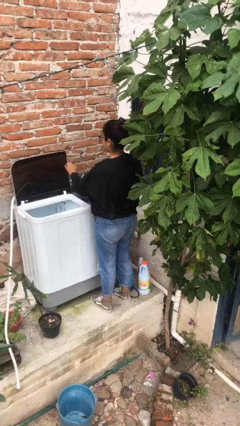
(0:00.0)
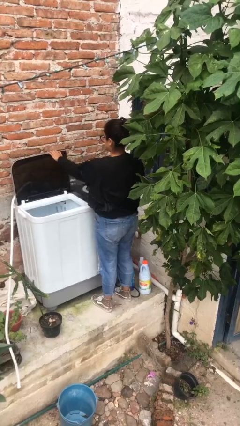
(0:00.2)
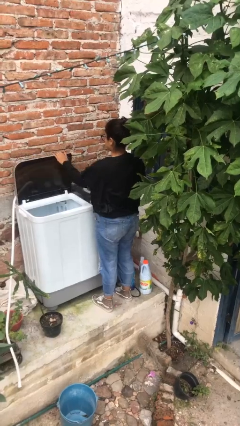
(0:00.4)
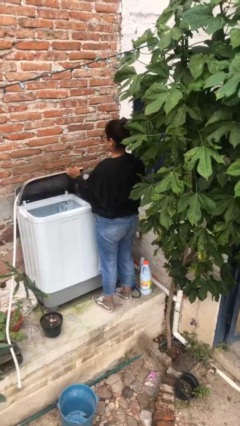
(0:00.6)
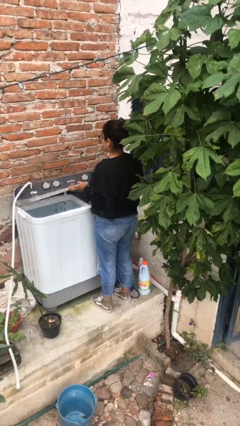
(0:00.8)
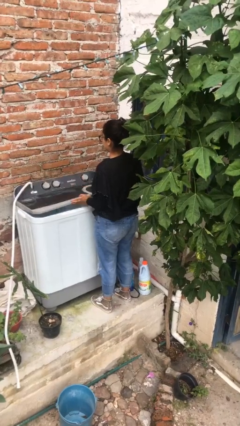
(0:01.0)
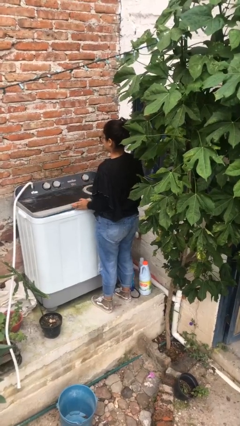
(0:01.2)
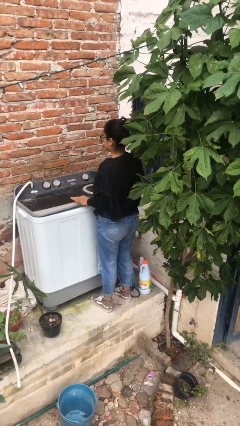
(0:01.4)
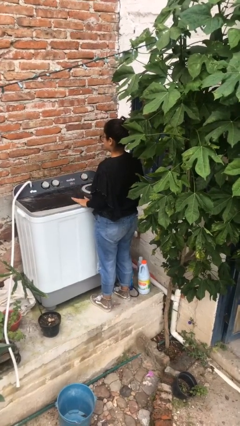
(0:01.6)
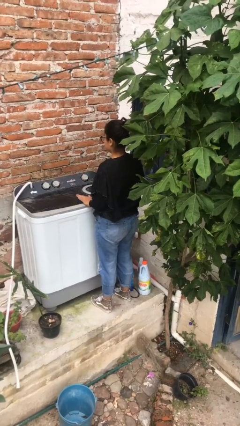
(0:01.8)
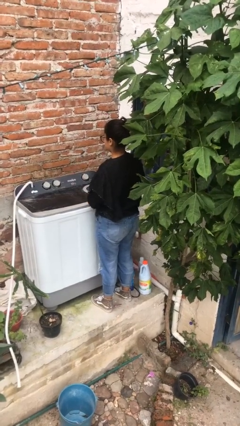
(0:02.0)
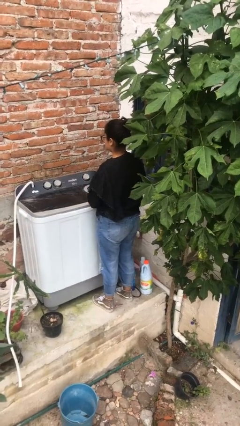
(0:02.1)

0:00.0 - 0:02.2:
person closes clothes washer

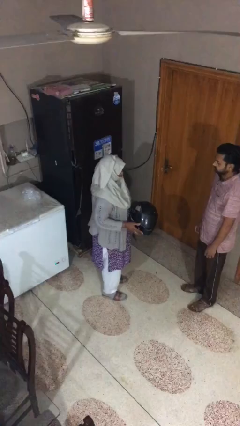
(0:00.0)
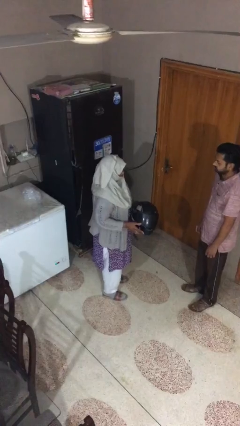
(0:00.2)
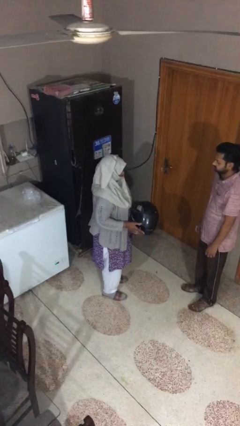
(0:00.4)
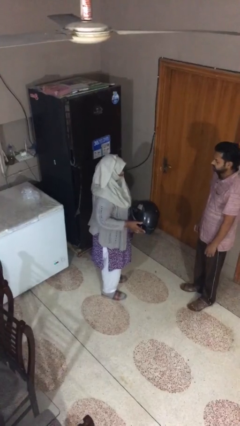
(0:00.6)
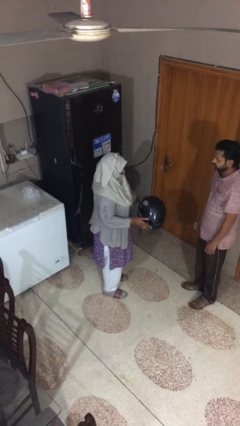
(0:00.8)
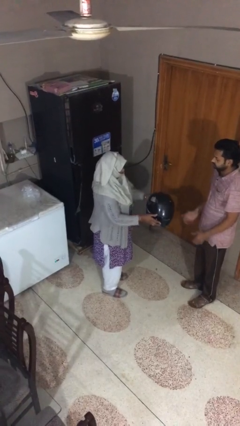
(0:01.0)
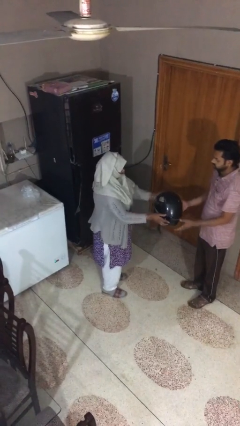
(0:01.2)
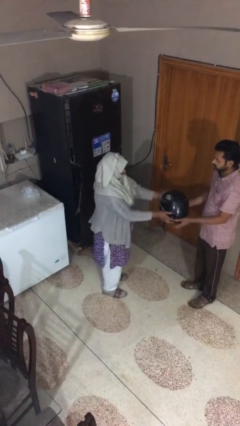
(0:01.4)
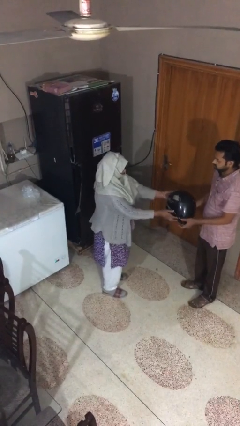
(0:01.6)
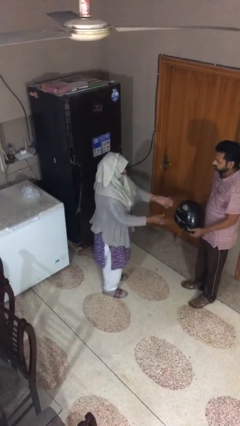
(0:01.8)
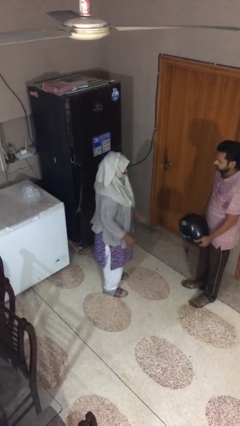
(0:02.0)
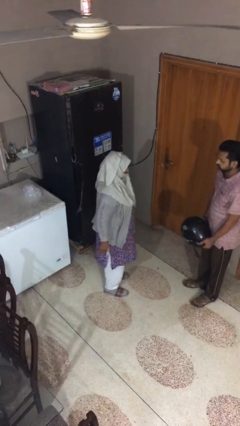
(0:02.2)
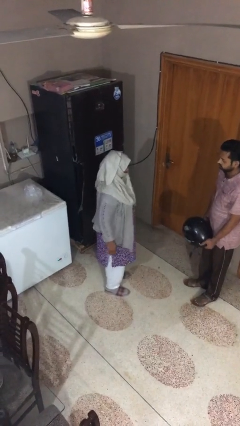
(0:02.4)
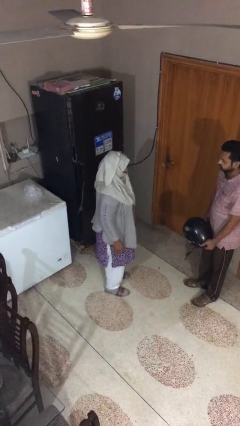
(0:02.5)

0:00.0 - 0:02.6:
person transfers object to person

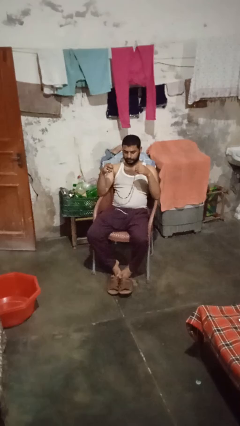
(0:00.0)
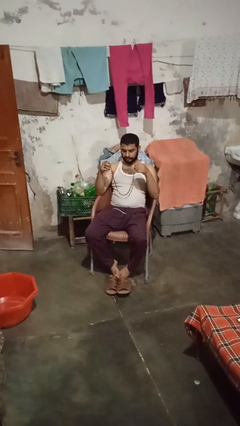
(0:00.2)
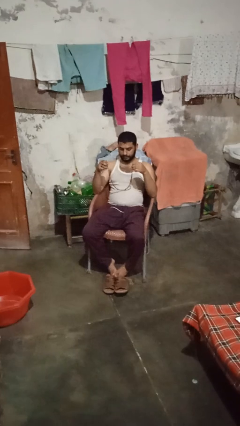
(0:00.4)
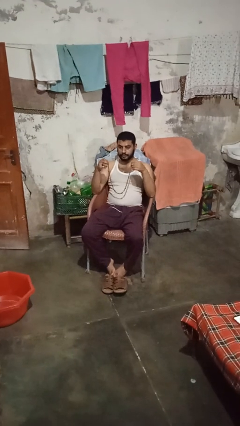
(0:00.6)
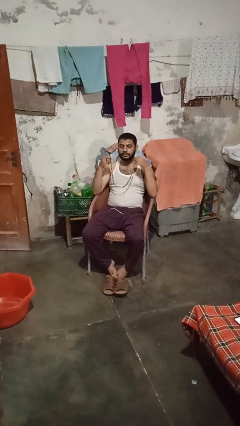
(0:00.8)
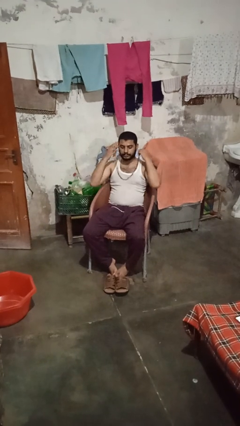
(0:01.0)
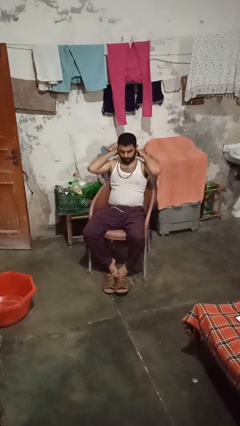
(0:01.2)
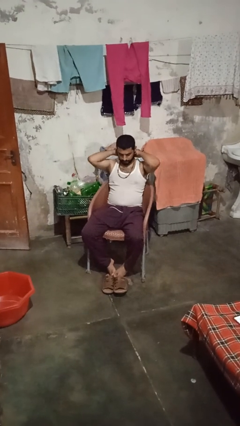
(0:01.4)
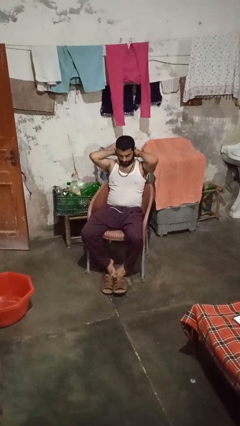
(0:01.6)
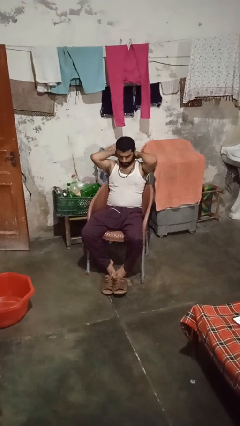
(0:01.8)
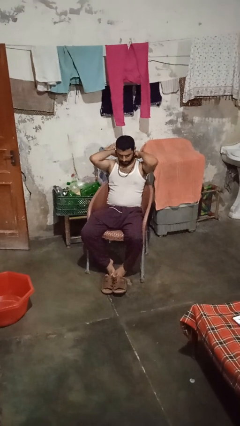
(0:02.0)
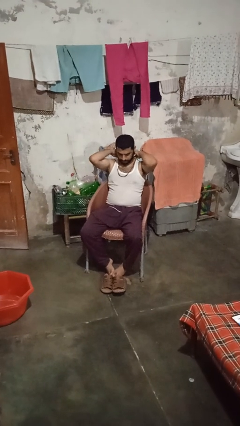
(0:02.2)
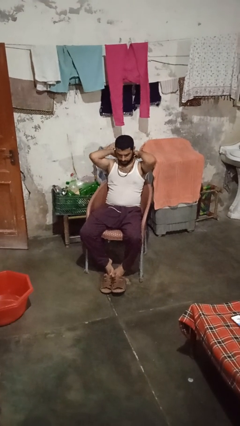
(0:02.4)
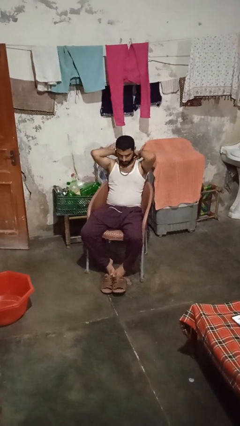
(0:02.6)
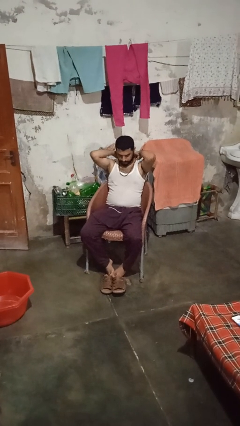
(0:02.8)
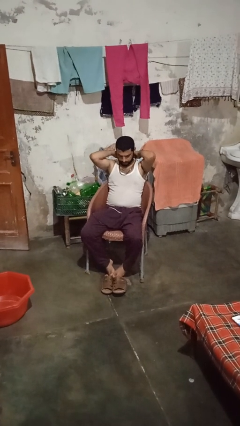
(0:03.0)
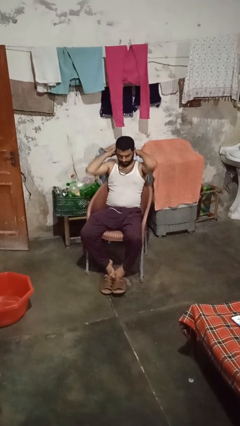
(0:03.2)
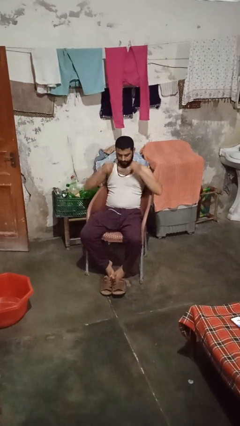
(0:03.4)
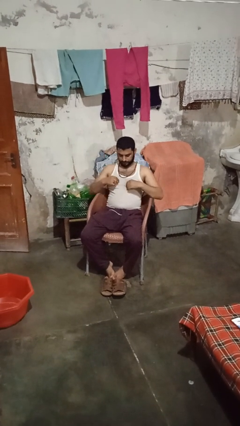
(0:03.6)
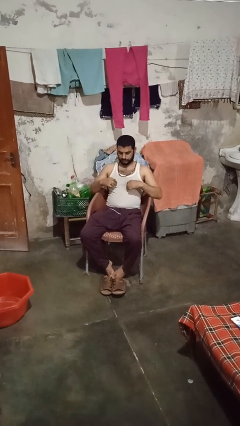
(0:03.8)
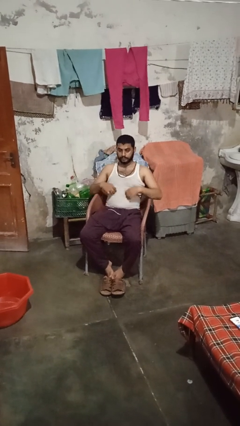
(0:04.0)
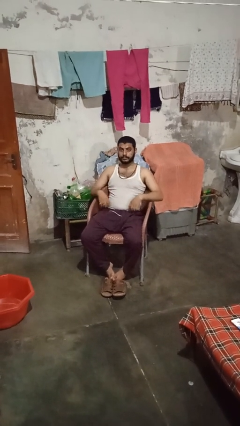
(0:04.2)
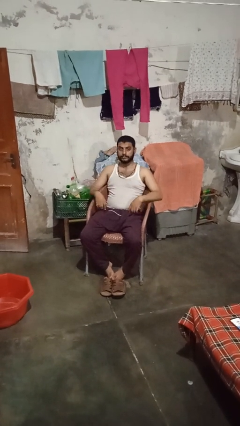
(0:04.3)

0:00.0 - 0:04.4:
person puts on necklace

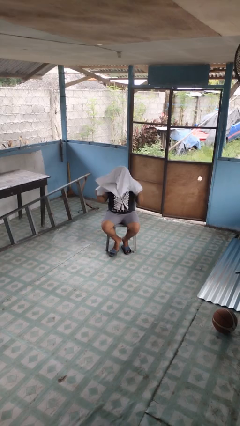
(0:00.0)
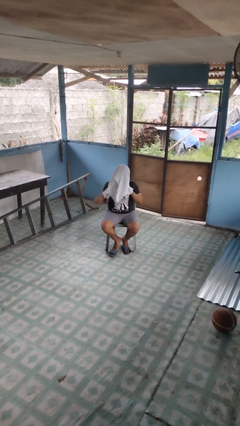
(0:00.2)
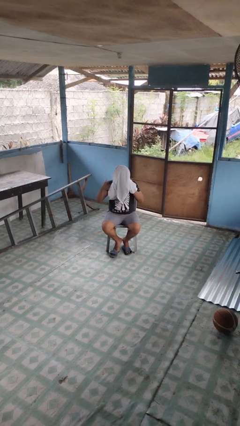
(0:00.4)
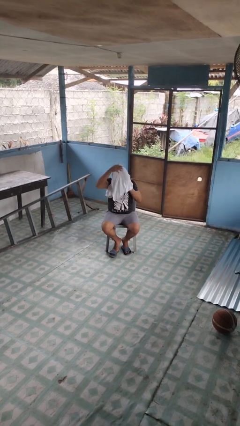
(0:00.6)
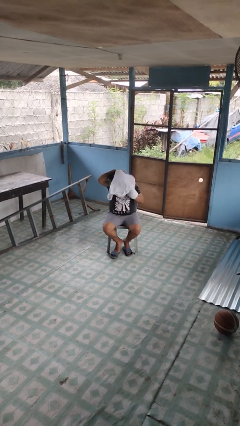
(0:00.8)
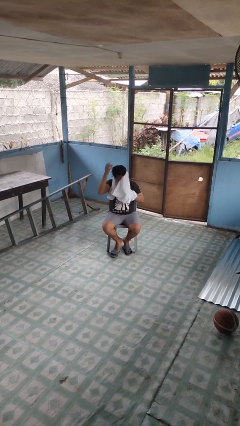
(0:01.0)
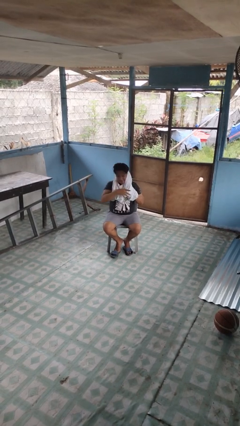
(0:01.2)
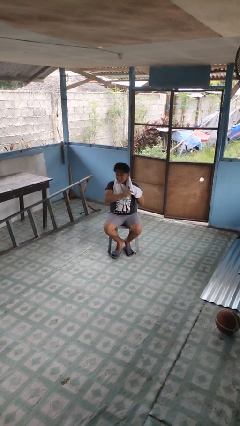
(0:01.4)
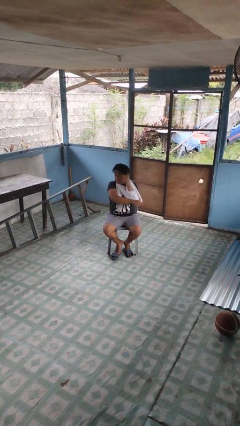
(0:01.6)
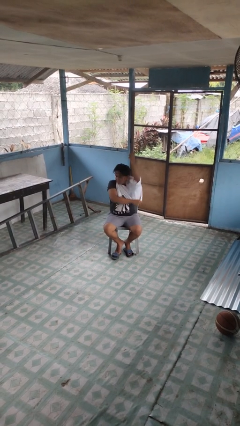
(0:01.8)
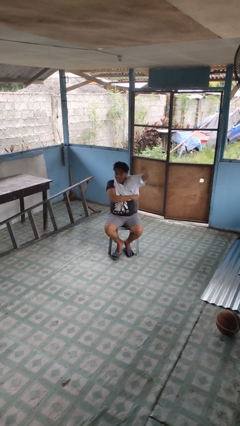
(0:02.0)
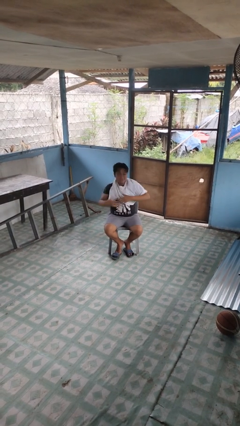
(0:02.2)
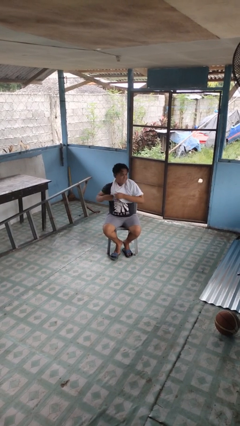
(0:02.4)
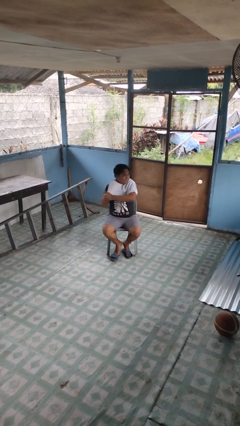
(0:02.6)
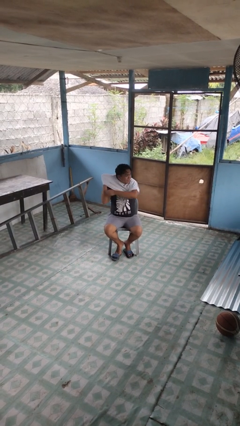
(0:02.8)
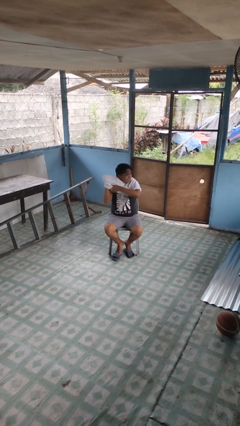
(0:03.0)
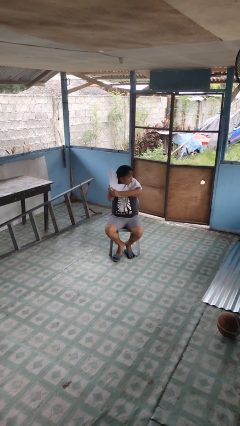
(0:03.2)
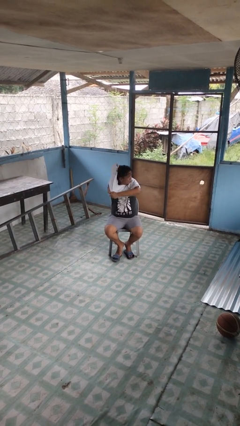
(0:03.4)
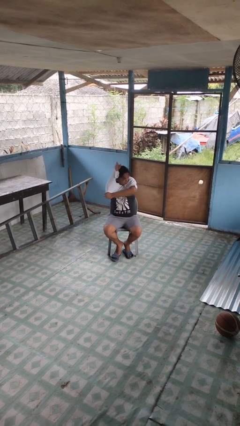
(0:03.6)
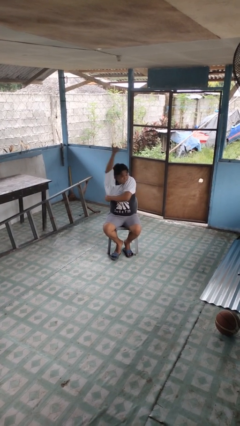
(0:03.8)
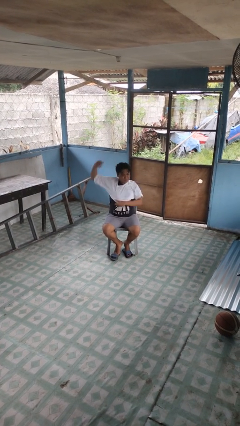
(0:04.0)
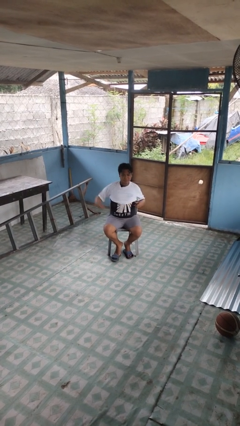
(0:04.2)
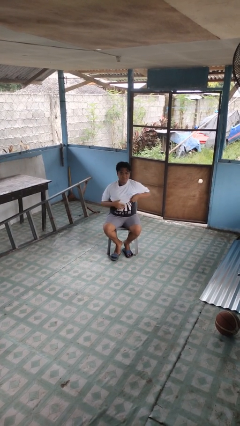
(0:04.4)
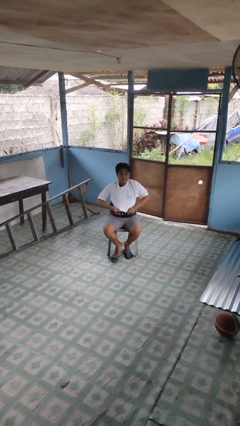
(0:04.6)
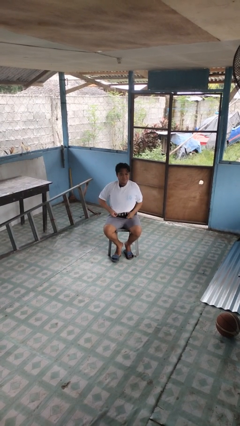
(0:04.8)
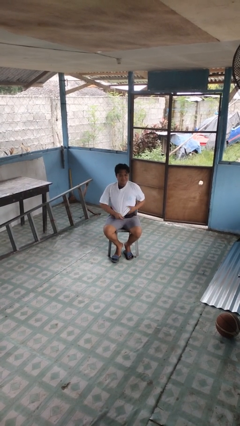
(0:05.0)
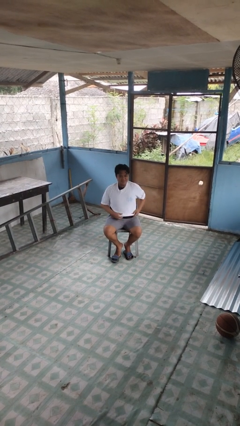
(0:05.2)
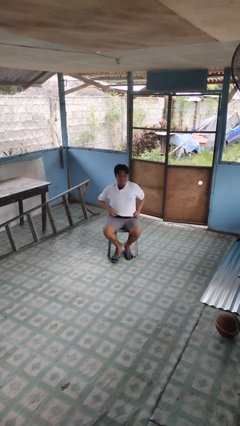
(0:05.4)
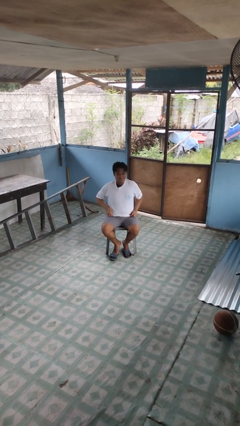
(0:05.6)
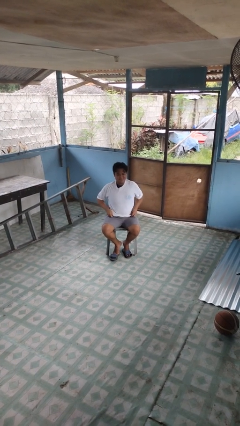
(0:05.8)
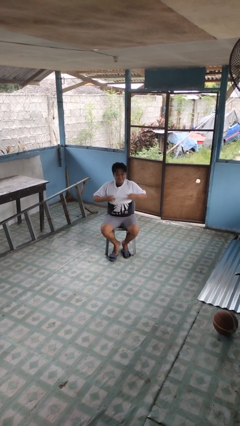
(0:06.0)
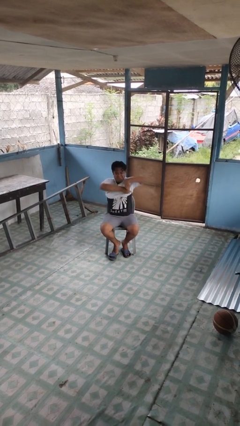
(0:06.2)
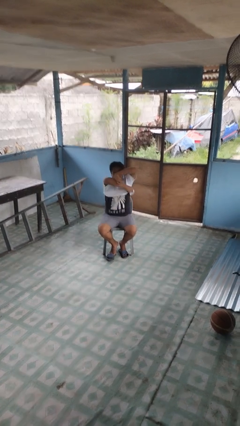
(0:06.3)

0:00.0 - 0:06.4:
person puts on shirt

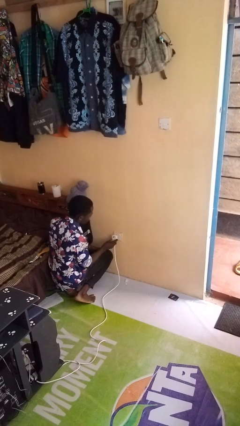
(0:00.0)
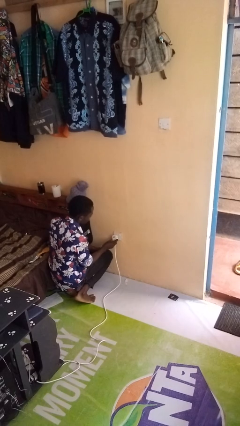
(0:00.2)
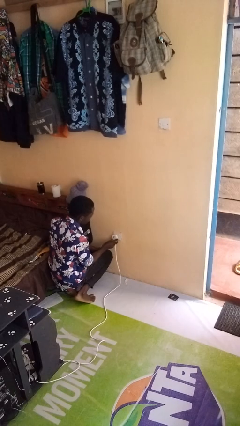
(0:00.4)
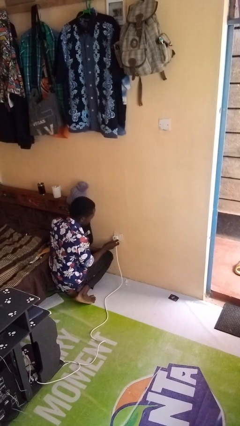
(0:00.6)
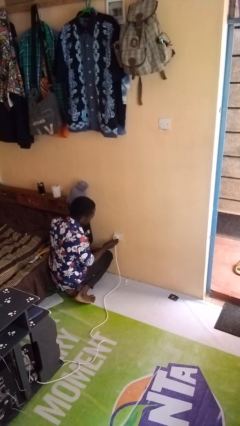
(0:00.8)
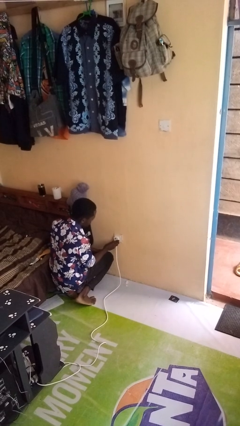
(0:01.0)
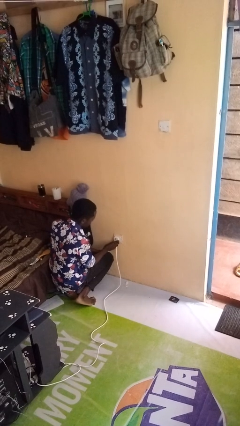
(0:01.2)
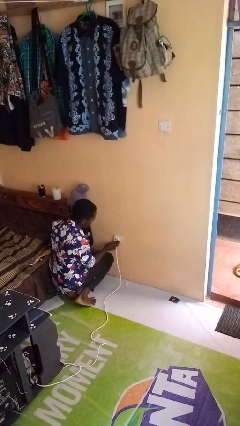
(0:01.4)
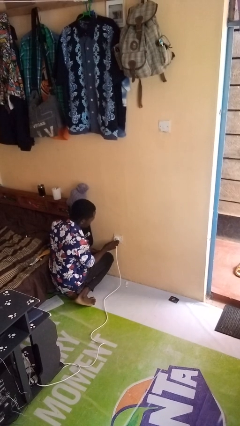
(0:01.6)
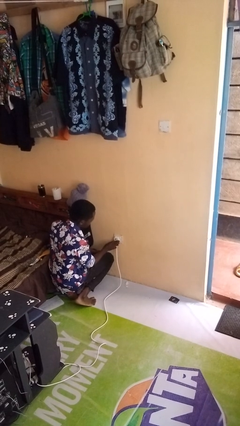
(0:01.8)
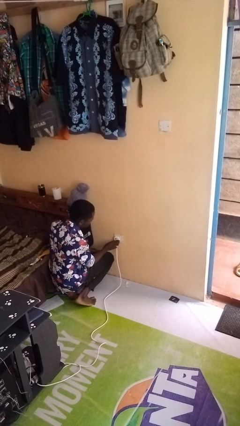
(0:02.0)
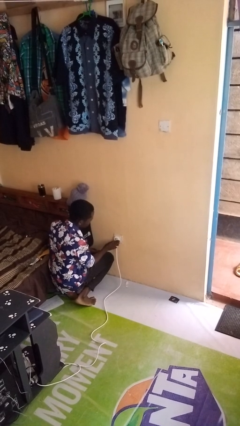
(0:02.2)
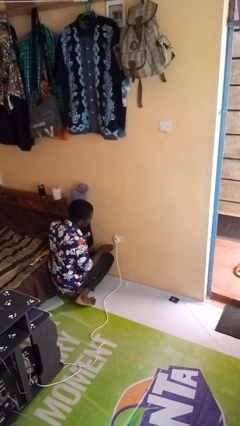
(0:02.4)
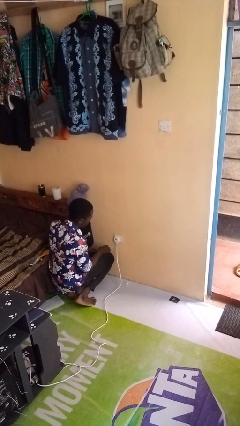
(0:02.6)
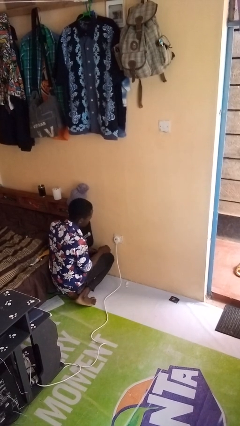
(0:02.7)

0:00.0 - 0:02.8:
person plugs into electrical socket
